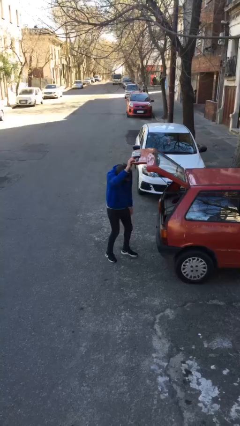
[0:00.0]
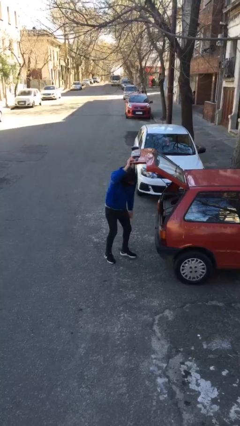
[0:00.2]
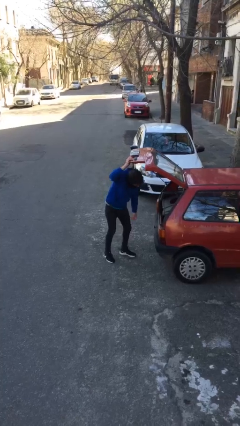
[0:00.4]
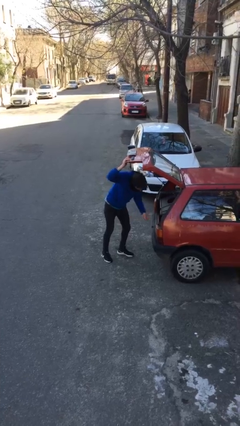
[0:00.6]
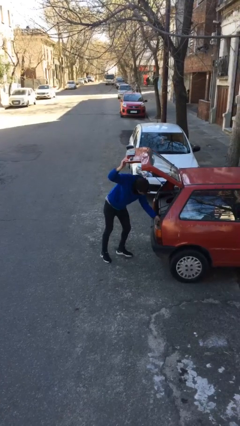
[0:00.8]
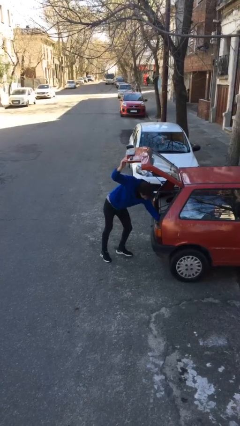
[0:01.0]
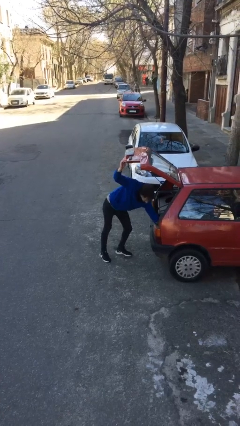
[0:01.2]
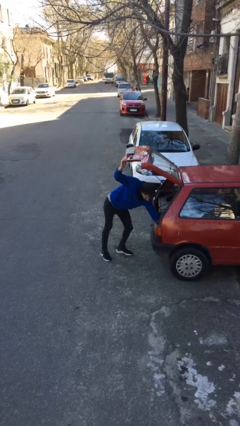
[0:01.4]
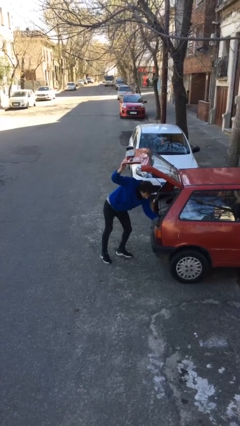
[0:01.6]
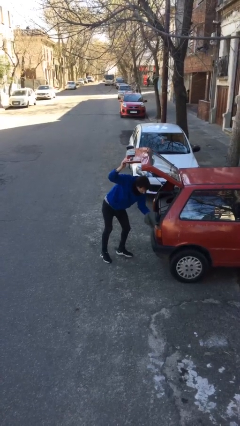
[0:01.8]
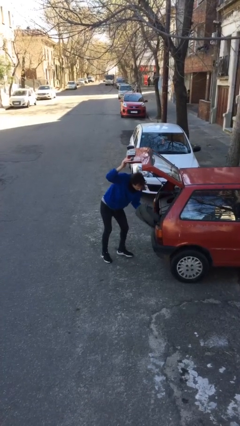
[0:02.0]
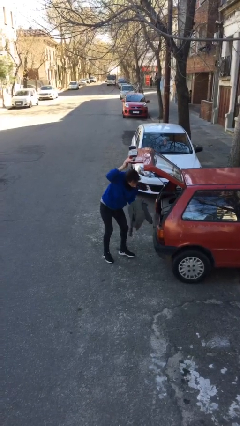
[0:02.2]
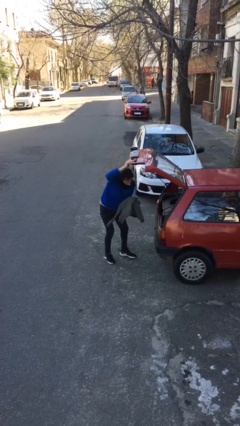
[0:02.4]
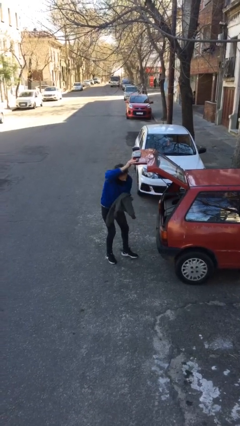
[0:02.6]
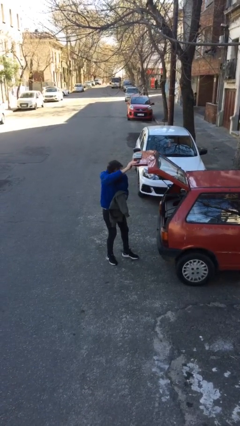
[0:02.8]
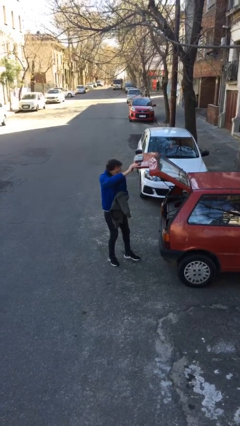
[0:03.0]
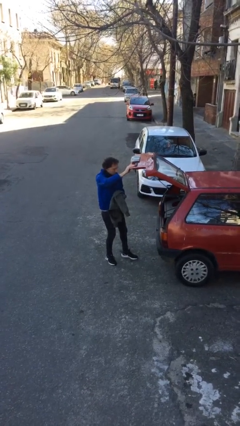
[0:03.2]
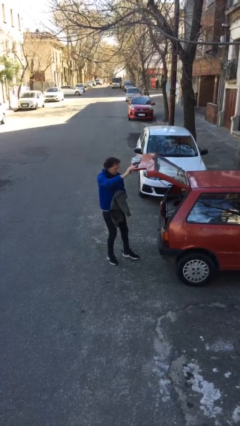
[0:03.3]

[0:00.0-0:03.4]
person unloads car

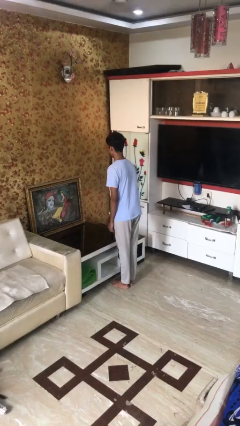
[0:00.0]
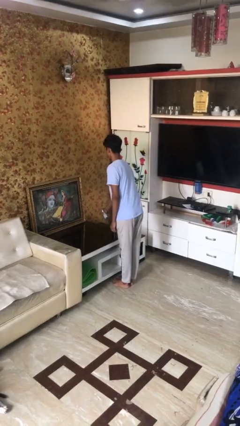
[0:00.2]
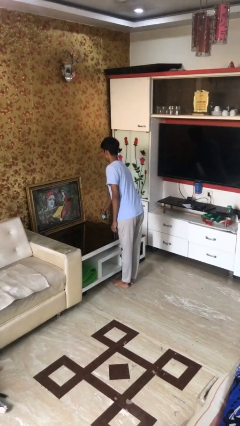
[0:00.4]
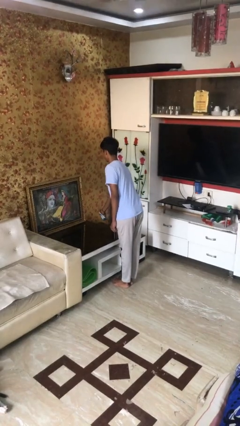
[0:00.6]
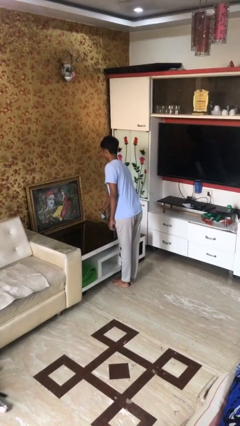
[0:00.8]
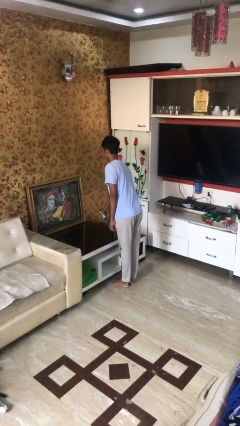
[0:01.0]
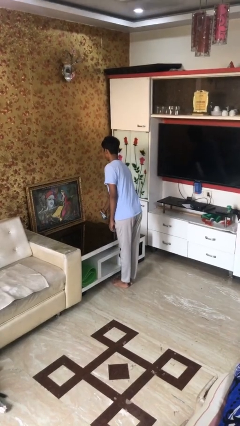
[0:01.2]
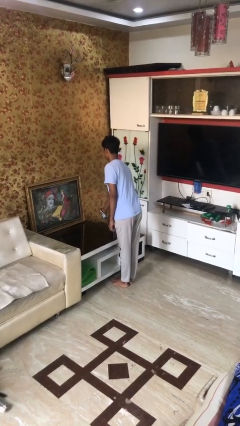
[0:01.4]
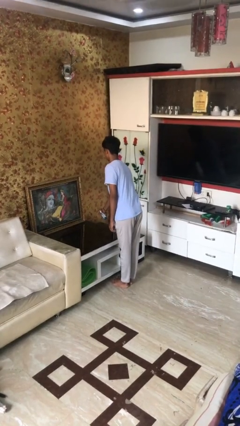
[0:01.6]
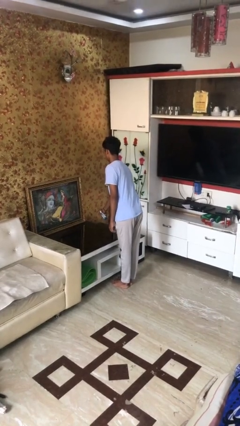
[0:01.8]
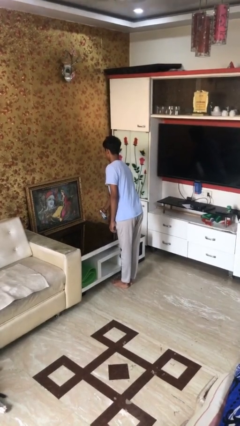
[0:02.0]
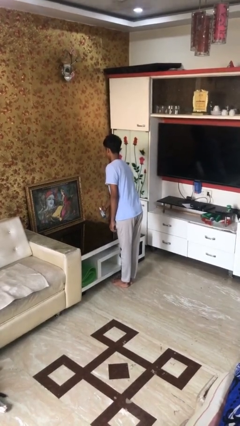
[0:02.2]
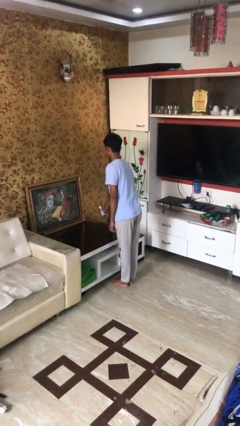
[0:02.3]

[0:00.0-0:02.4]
person sprays from bottle

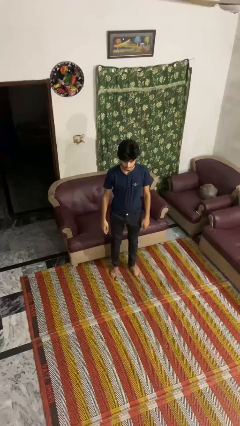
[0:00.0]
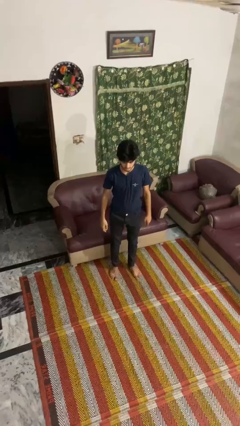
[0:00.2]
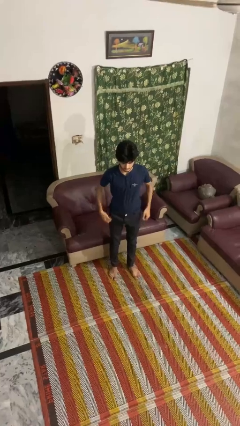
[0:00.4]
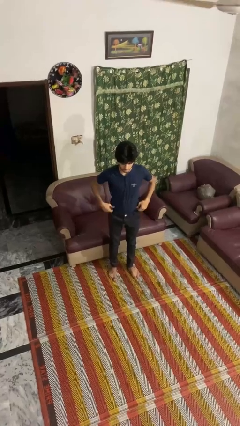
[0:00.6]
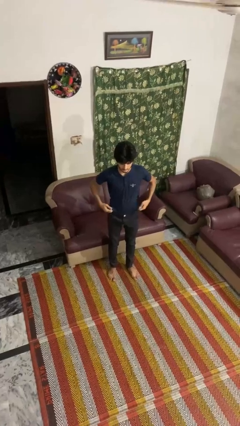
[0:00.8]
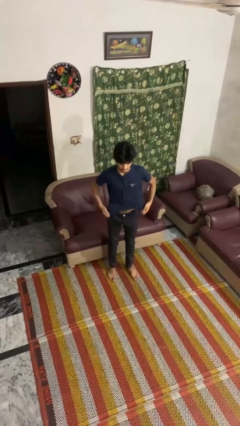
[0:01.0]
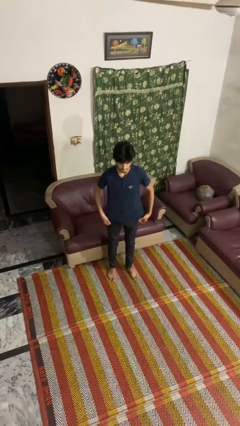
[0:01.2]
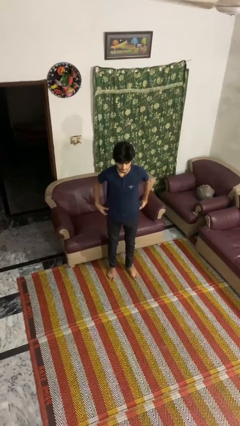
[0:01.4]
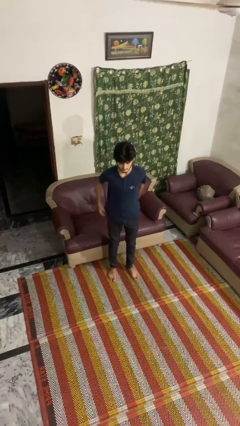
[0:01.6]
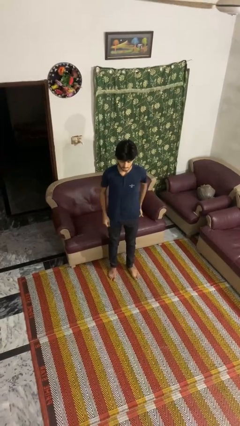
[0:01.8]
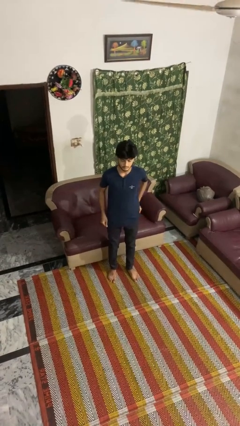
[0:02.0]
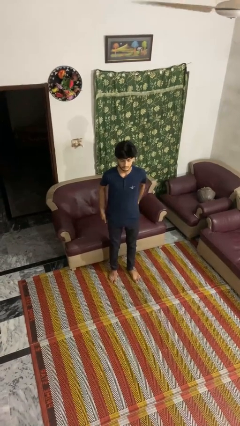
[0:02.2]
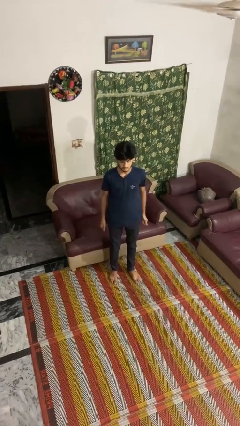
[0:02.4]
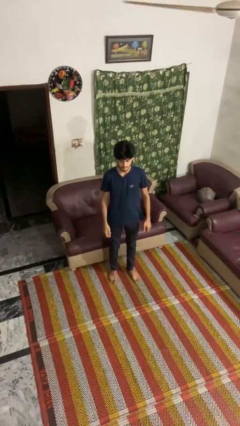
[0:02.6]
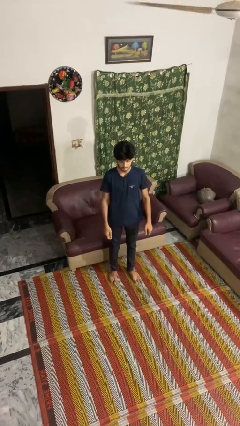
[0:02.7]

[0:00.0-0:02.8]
person untucks shirt

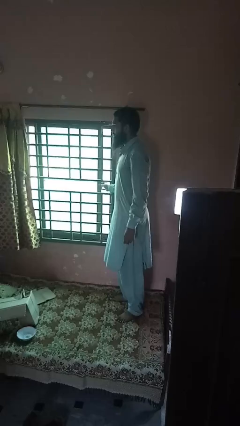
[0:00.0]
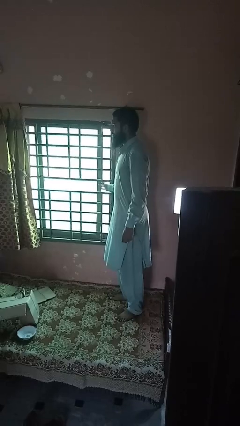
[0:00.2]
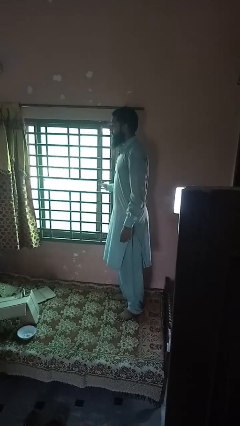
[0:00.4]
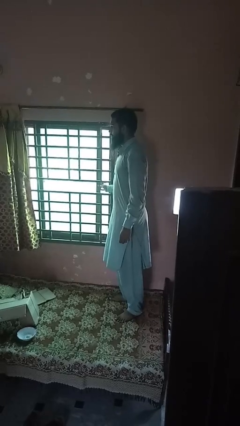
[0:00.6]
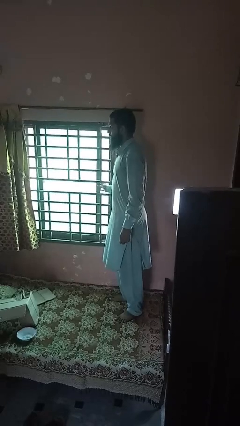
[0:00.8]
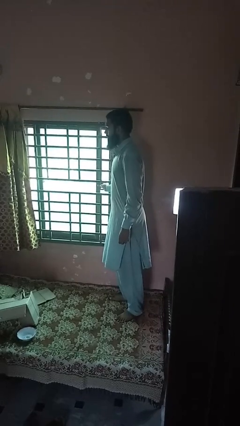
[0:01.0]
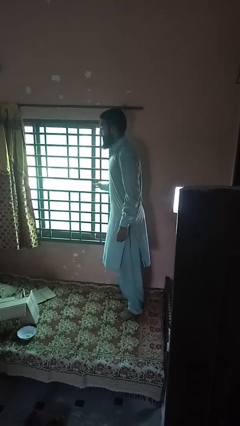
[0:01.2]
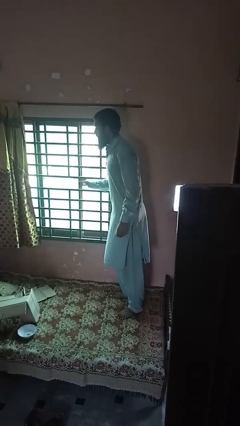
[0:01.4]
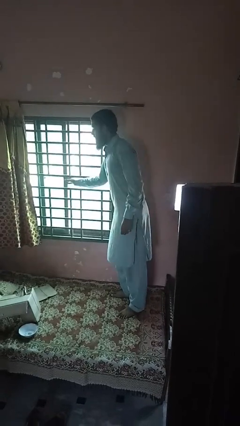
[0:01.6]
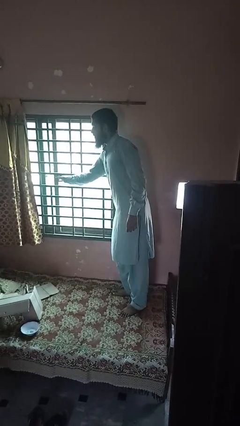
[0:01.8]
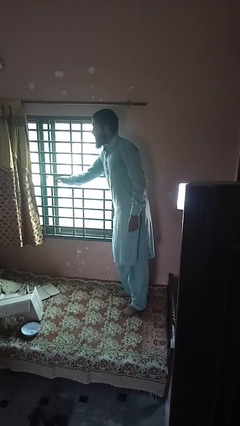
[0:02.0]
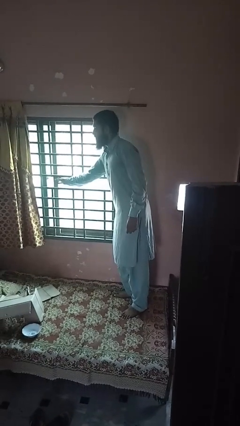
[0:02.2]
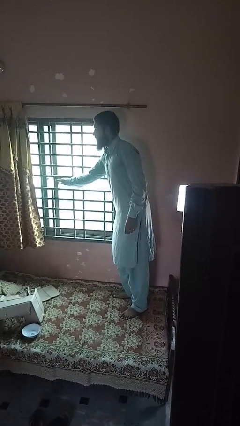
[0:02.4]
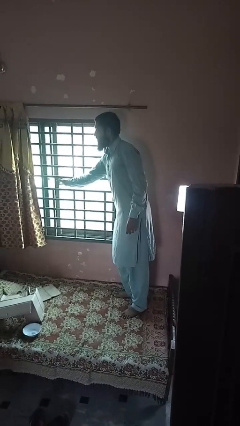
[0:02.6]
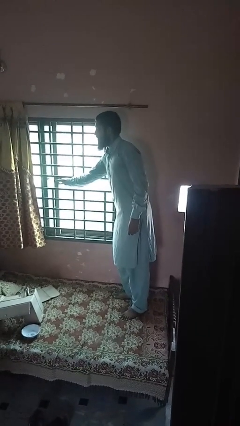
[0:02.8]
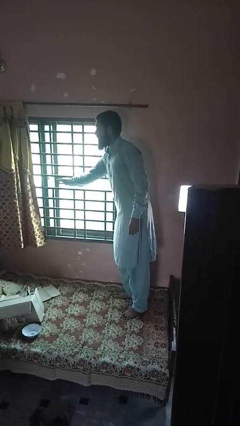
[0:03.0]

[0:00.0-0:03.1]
person opens home window

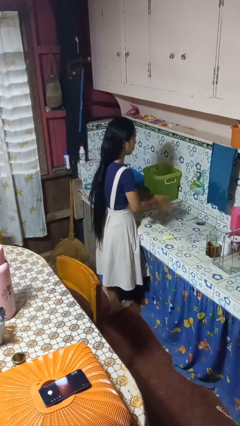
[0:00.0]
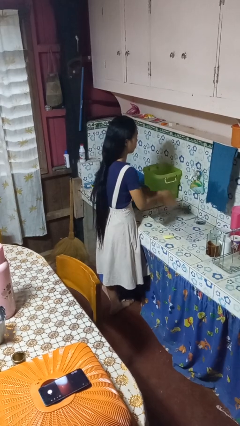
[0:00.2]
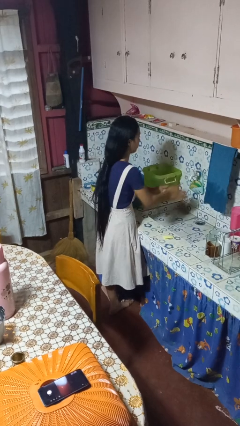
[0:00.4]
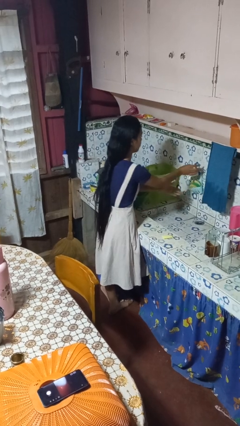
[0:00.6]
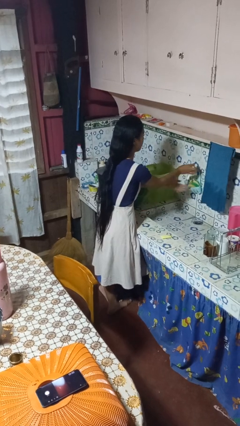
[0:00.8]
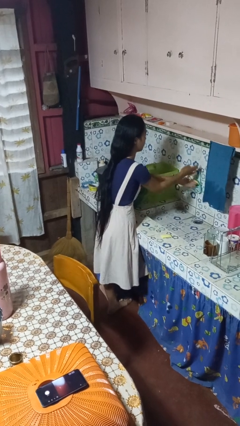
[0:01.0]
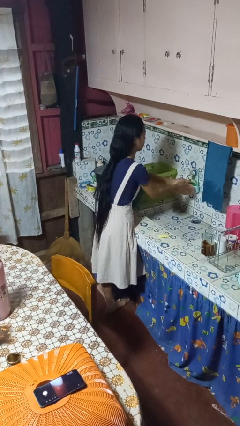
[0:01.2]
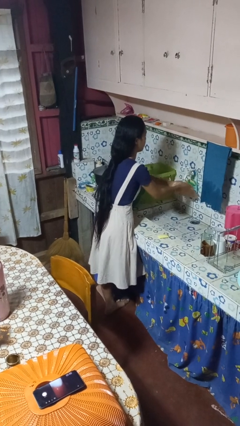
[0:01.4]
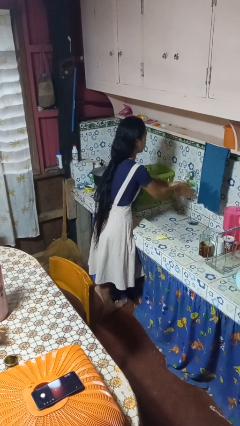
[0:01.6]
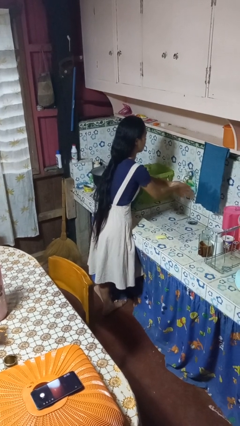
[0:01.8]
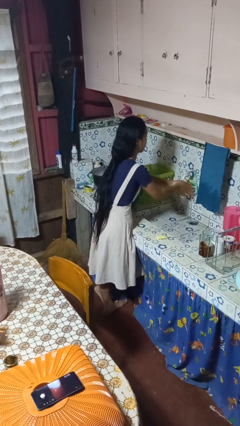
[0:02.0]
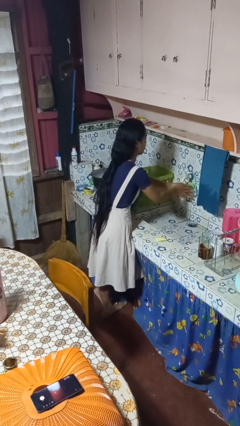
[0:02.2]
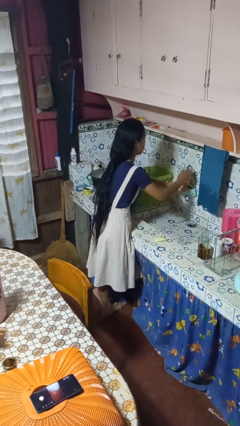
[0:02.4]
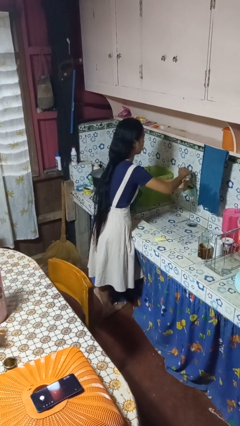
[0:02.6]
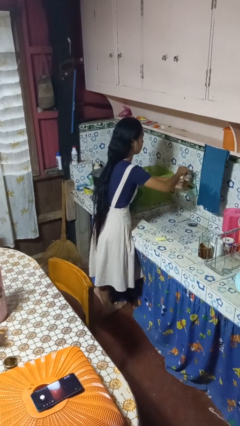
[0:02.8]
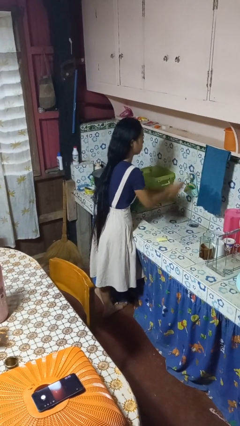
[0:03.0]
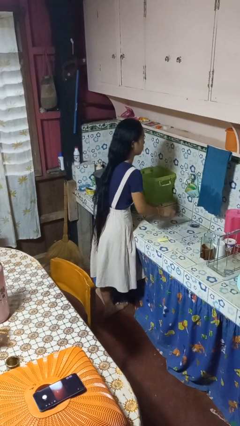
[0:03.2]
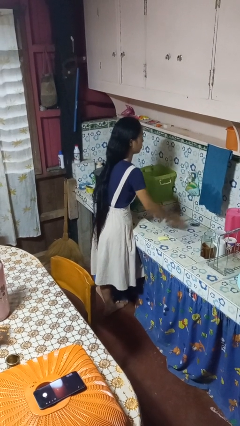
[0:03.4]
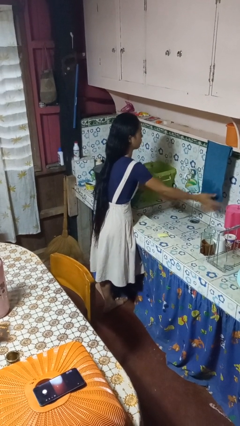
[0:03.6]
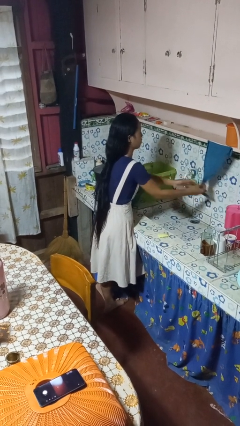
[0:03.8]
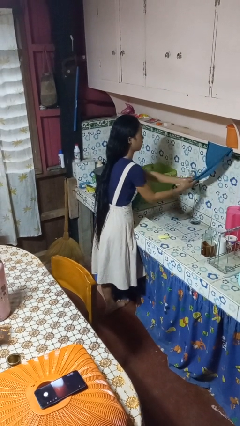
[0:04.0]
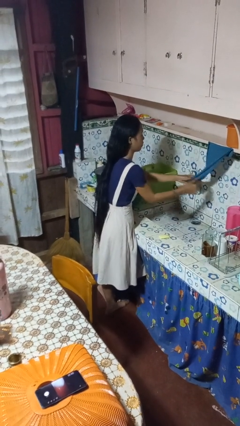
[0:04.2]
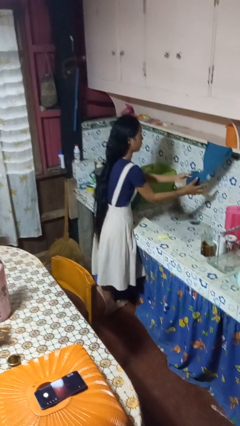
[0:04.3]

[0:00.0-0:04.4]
person washes hands

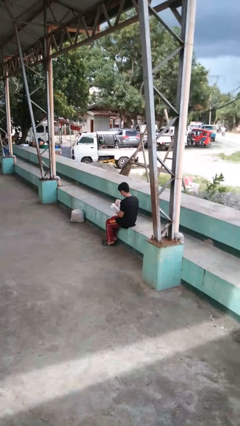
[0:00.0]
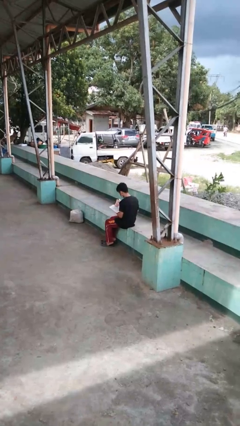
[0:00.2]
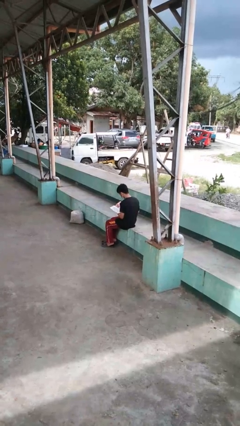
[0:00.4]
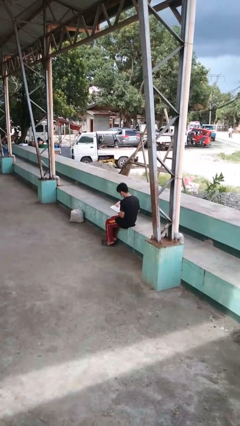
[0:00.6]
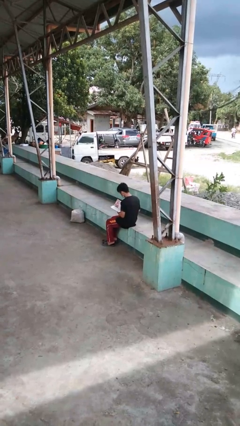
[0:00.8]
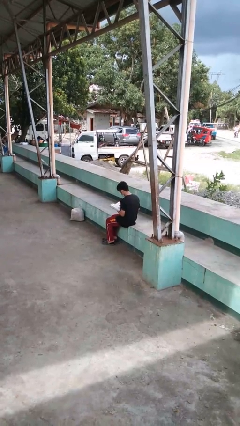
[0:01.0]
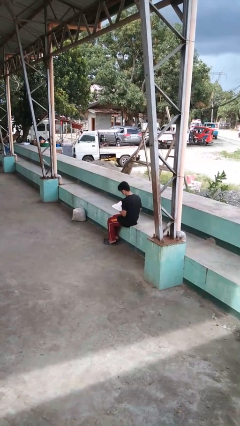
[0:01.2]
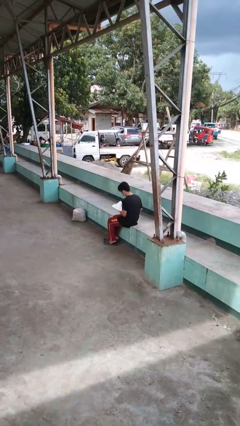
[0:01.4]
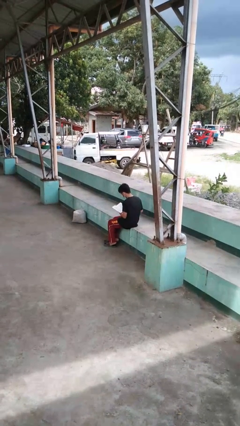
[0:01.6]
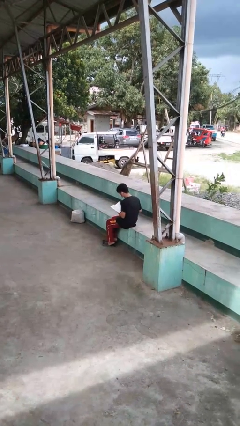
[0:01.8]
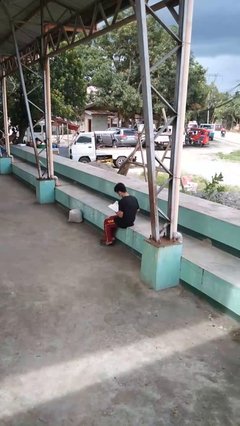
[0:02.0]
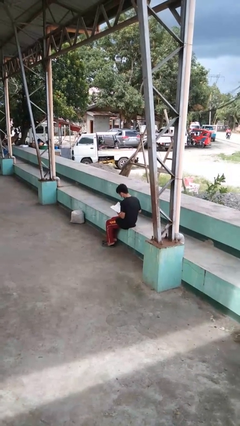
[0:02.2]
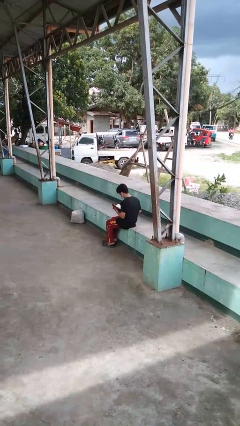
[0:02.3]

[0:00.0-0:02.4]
person reads book
